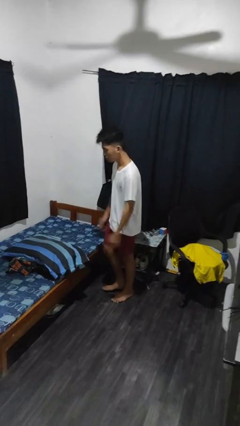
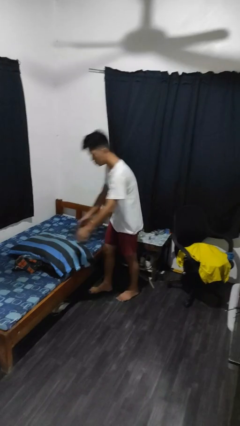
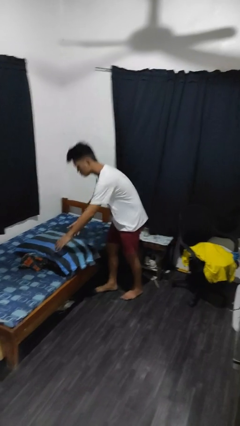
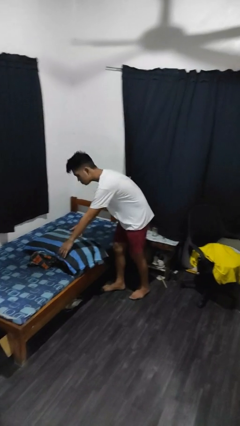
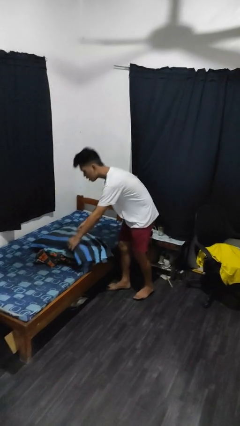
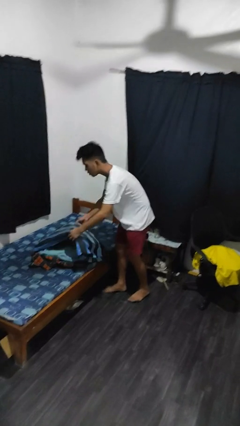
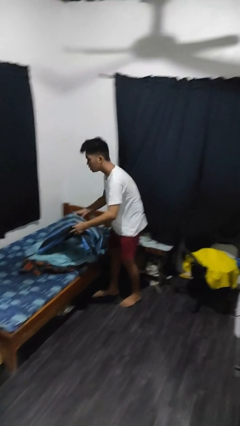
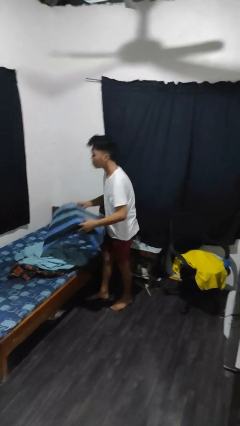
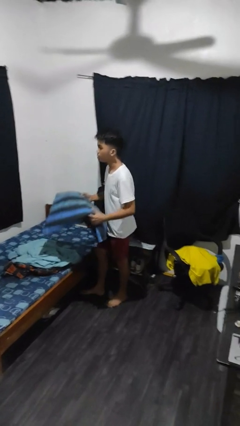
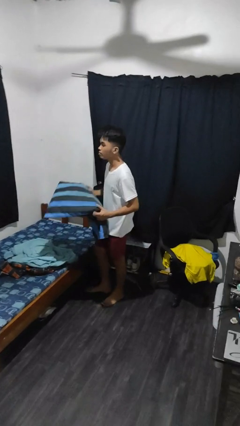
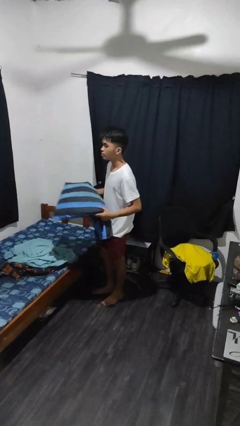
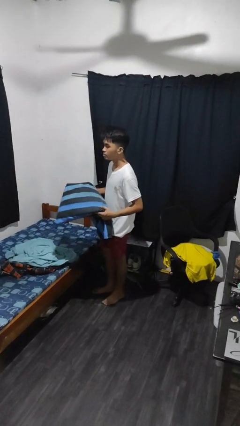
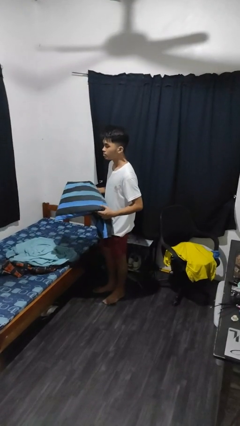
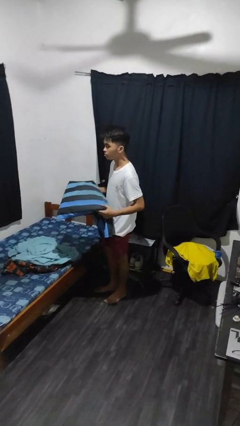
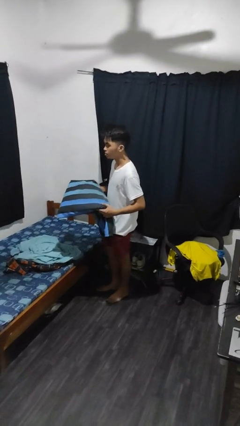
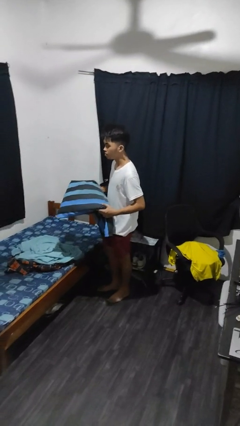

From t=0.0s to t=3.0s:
person picks up object from bed

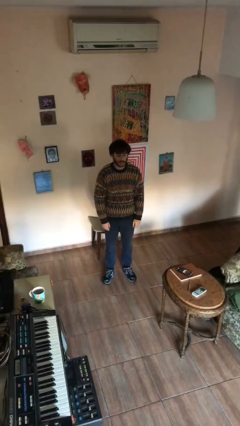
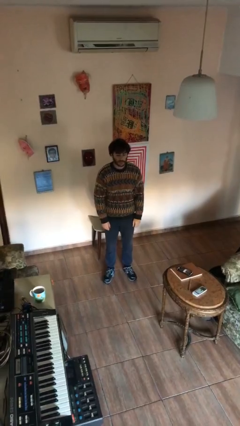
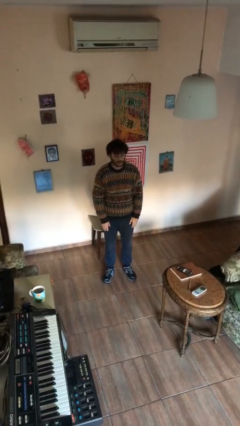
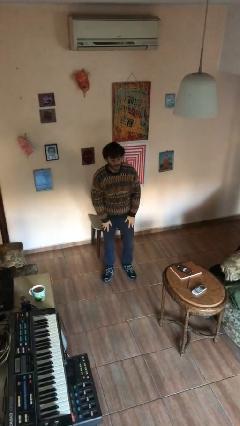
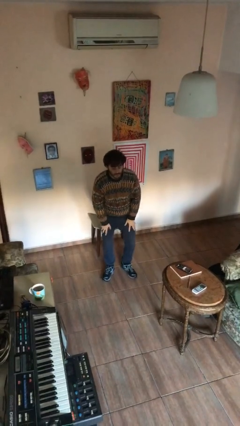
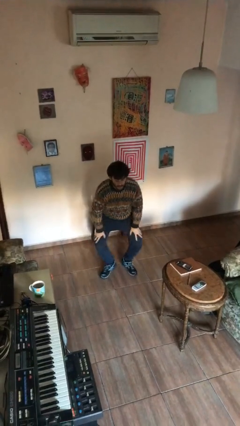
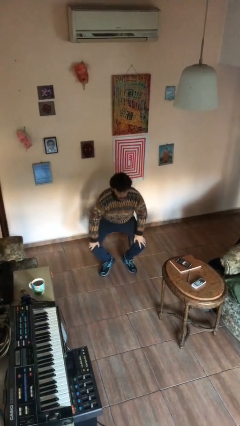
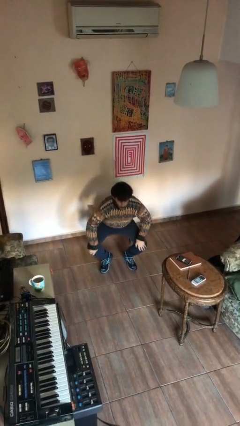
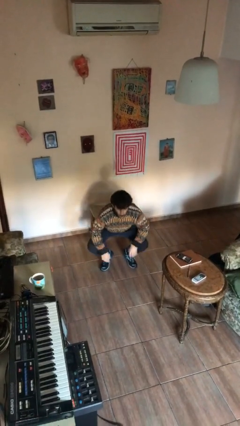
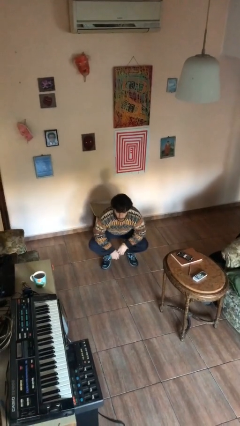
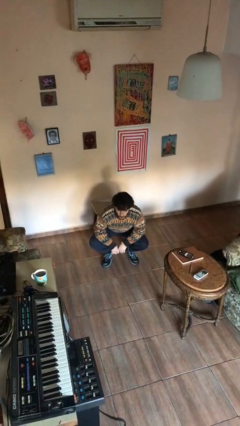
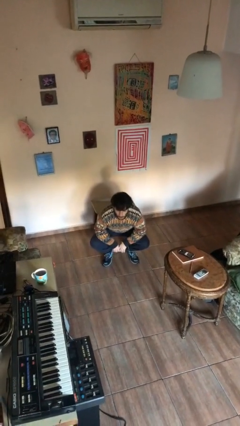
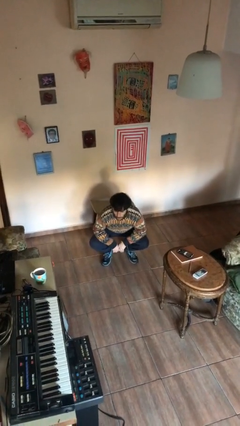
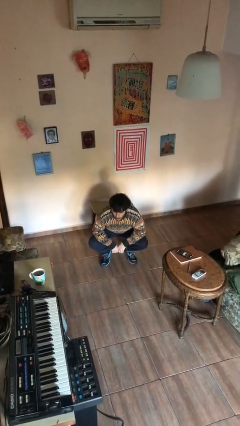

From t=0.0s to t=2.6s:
person squats

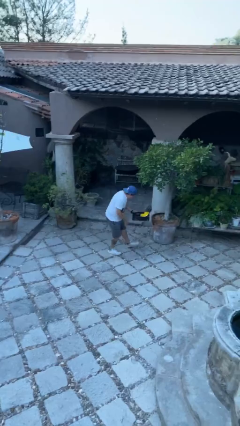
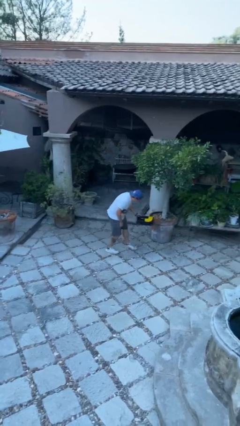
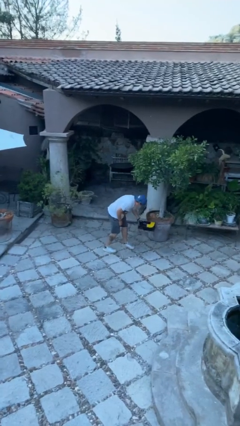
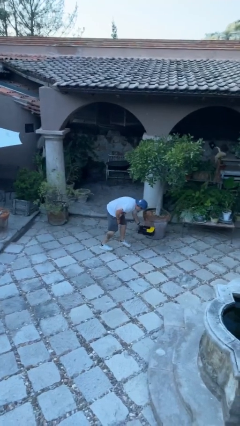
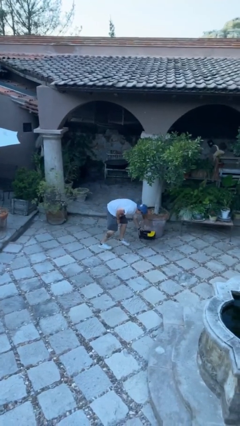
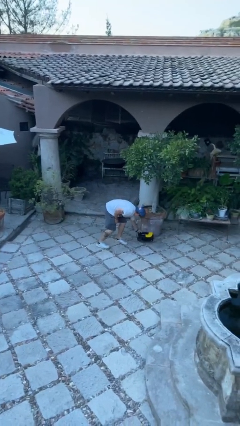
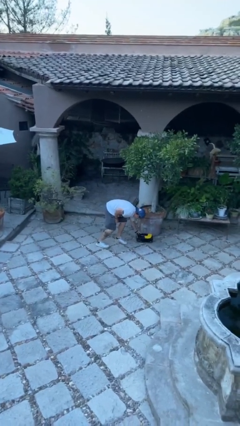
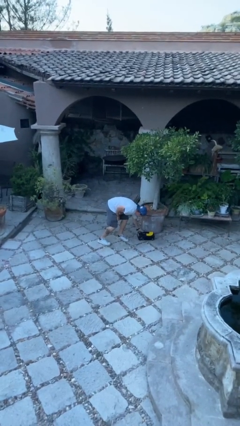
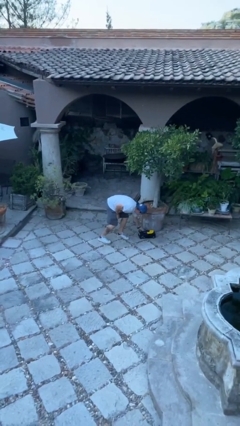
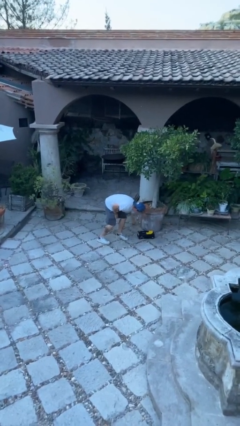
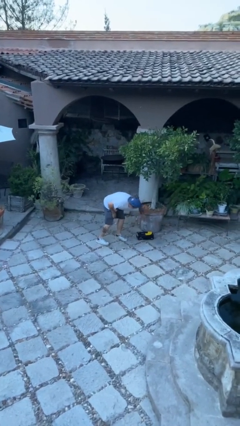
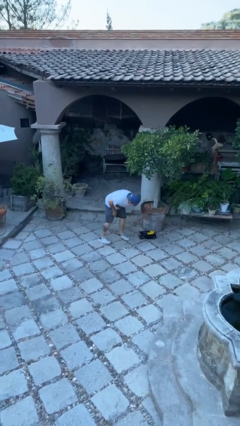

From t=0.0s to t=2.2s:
person puts down object on floor

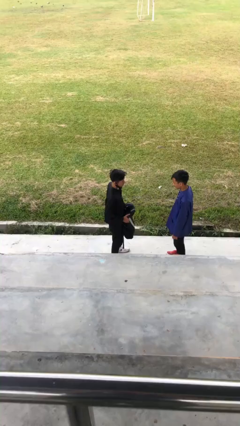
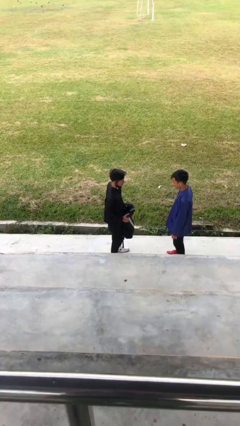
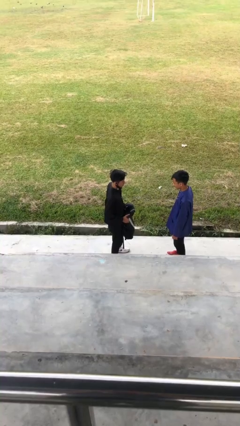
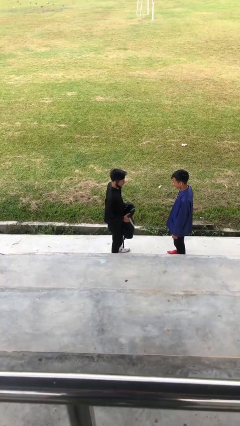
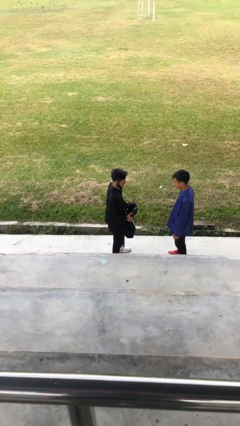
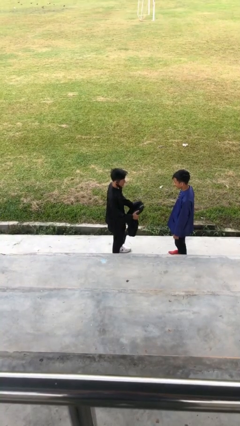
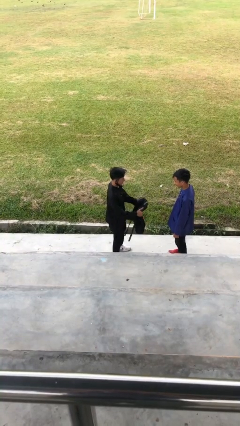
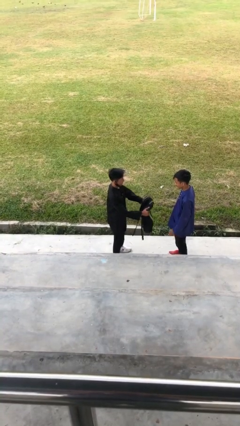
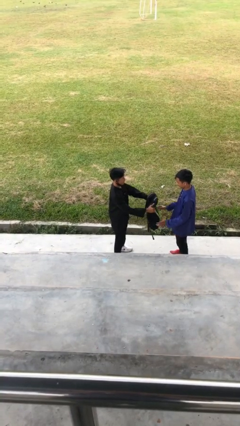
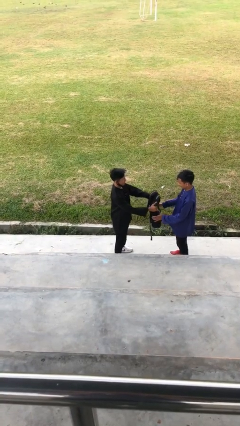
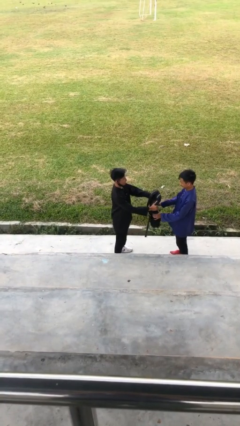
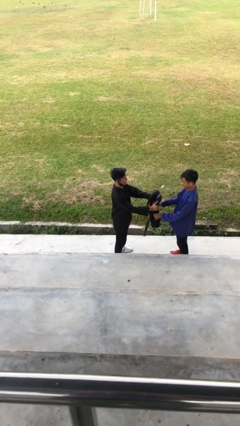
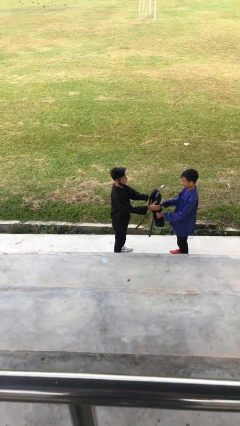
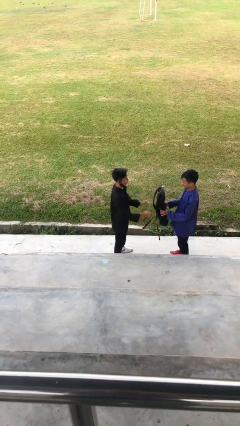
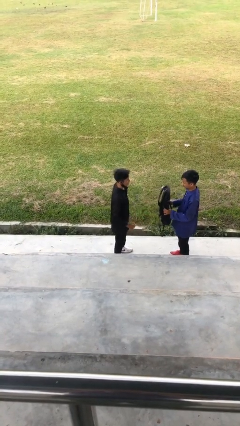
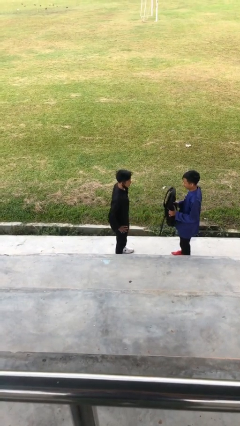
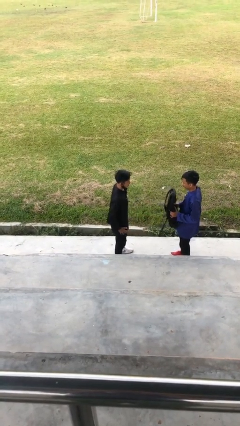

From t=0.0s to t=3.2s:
person transfers object to person

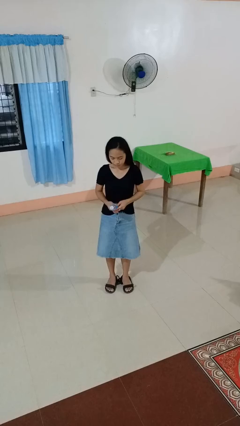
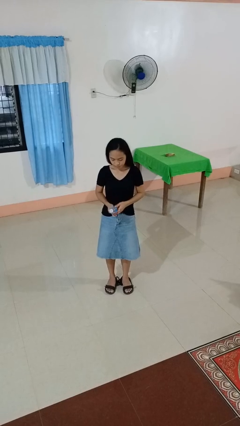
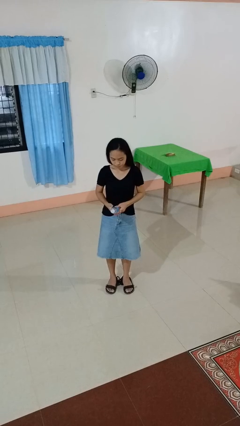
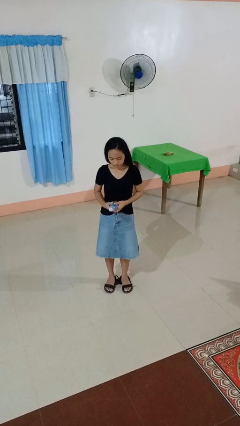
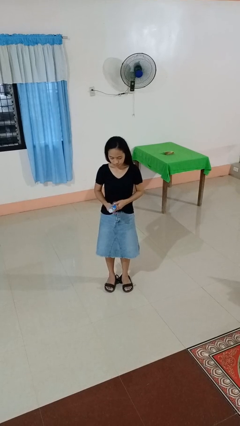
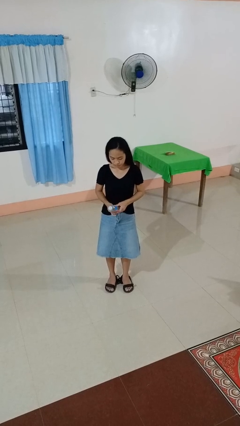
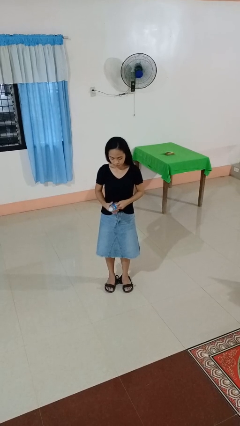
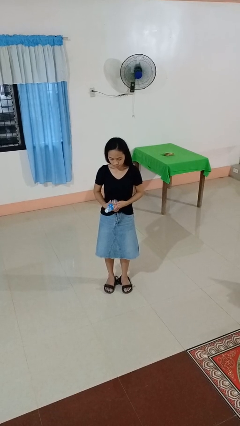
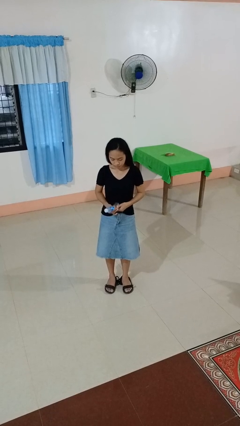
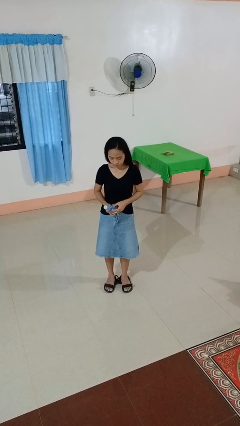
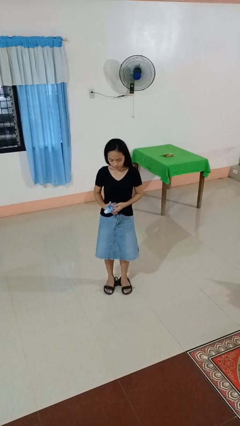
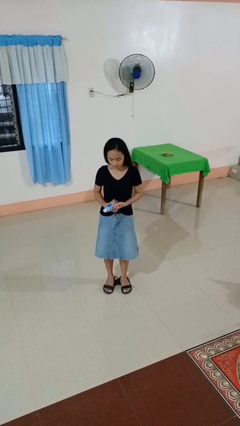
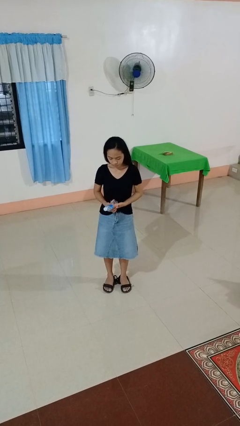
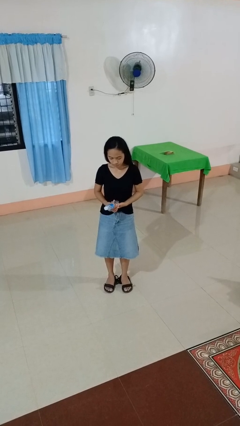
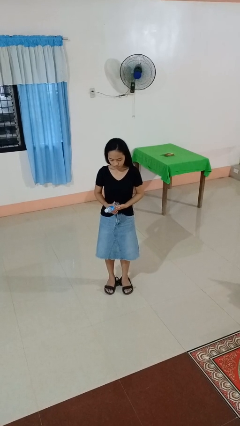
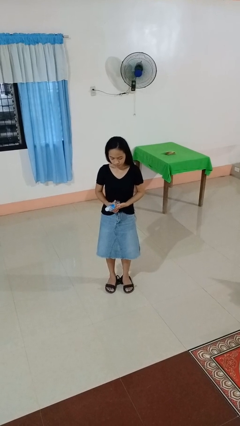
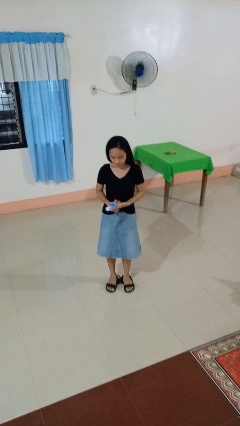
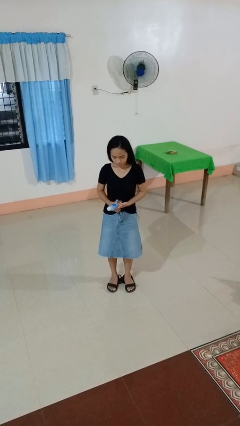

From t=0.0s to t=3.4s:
person squeezes object

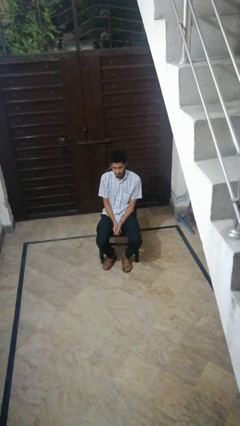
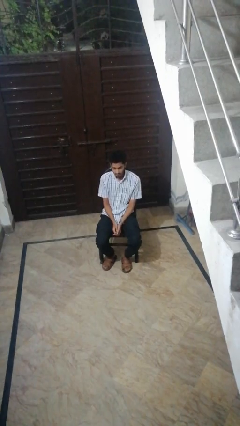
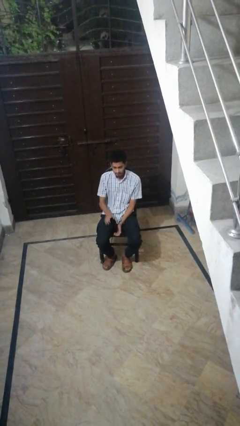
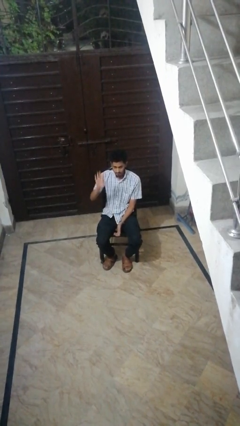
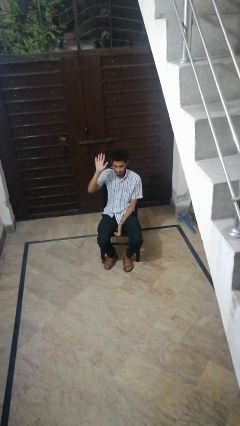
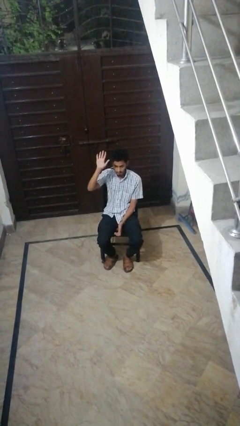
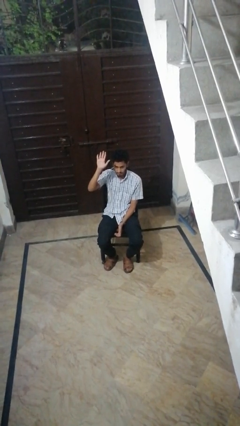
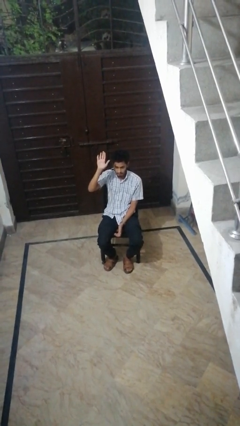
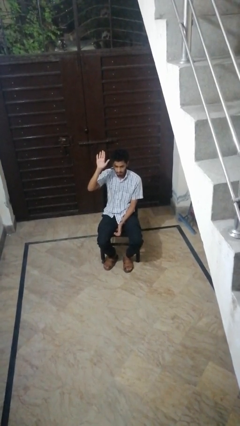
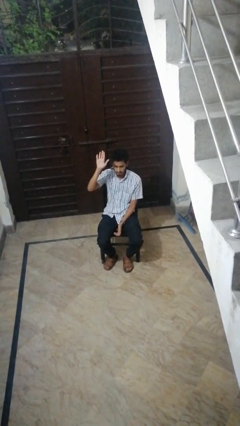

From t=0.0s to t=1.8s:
person gestures raise hand

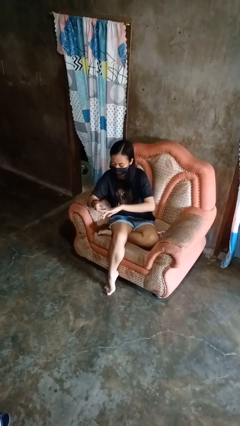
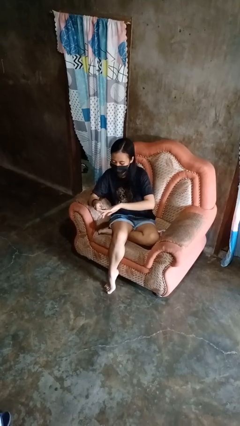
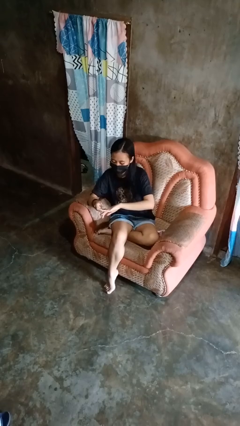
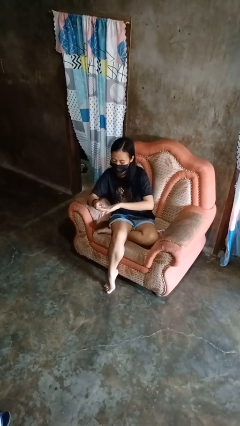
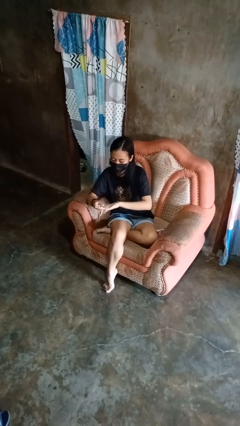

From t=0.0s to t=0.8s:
person clips fingernails
